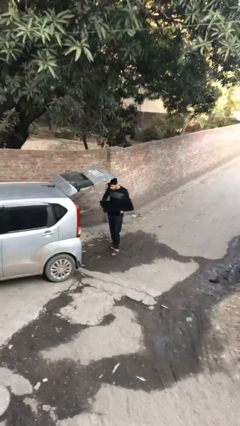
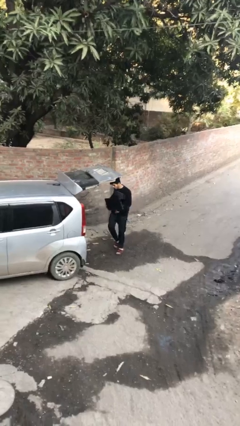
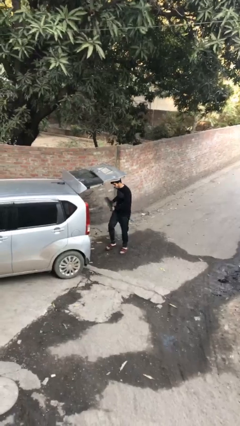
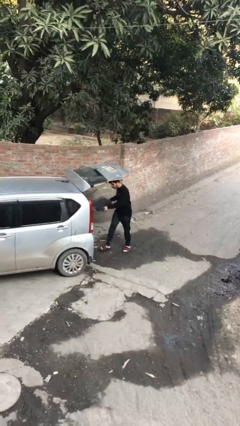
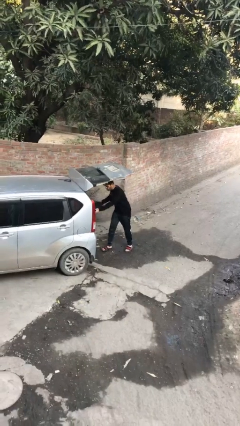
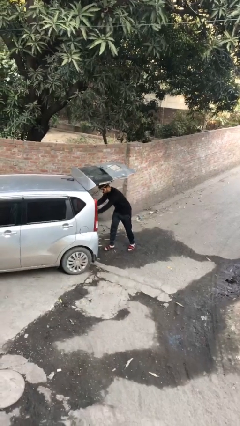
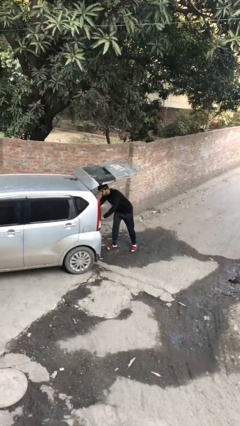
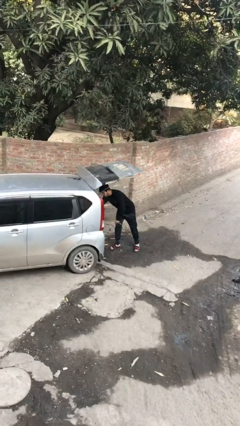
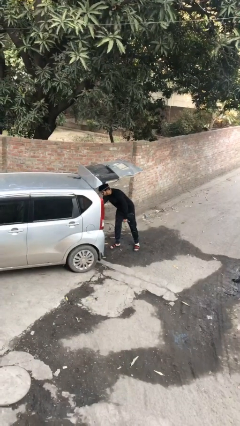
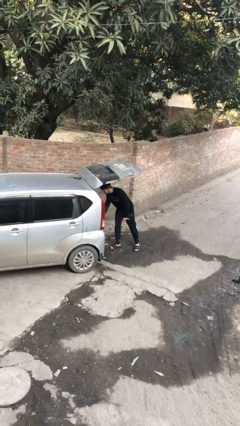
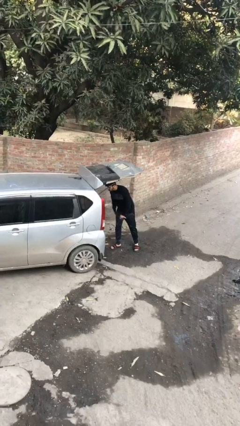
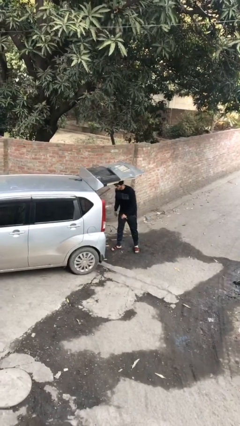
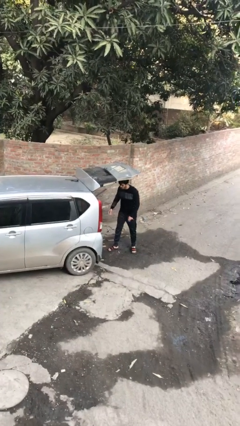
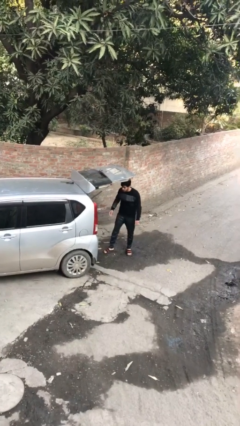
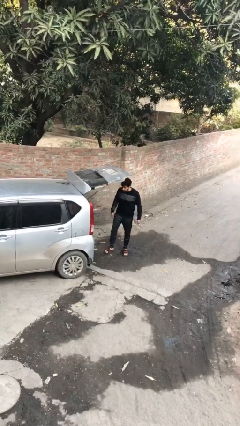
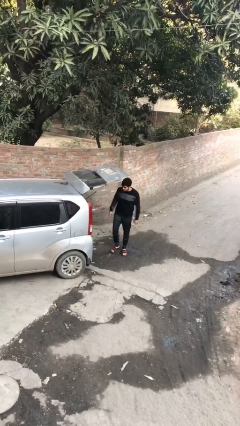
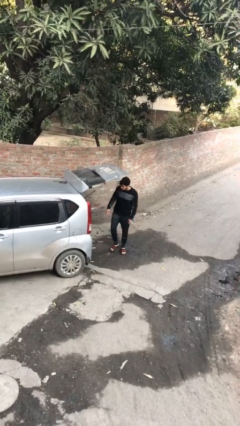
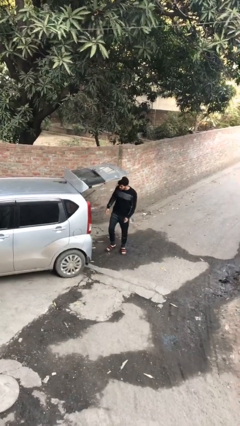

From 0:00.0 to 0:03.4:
person loads car

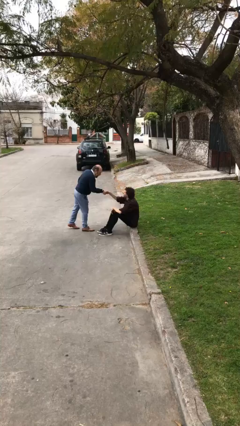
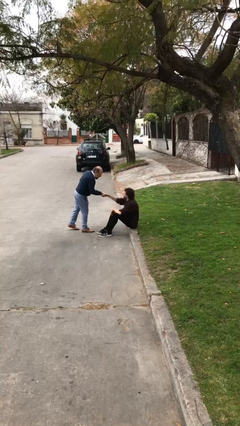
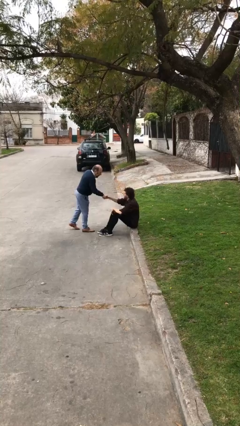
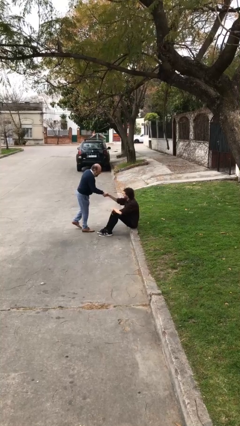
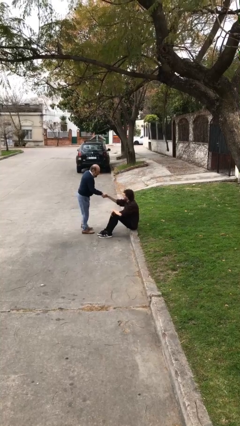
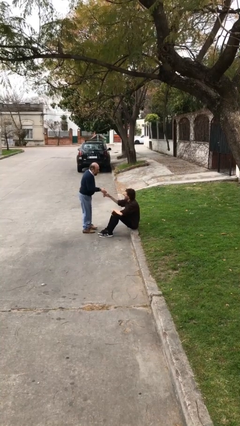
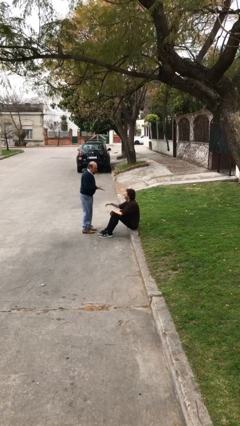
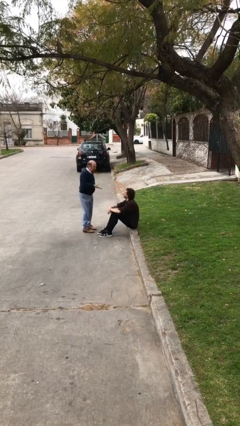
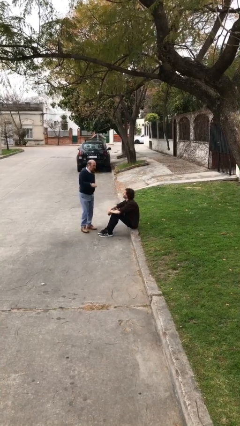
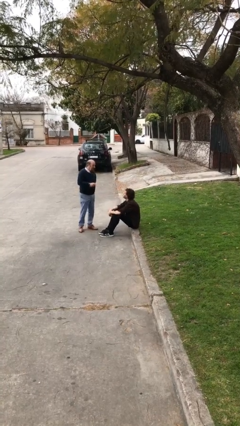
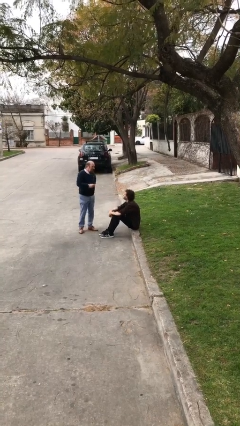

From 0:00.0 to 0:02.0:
person shakes hand

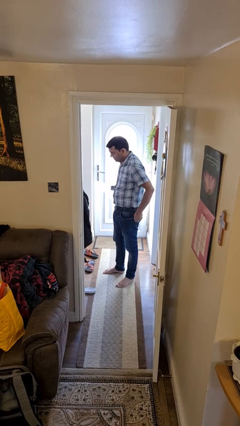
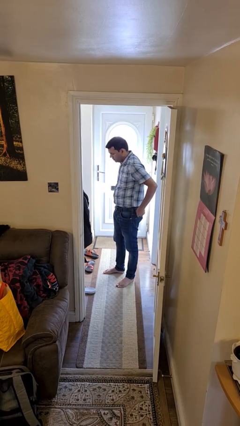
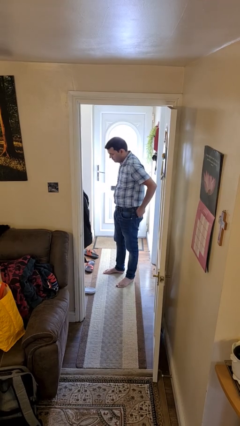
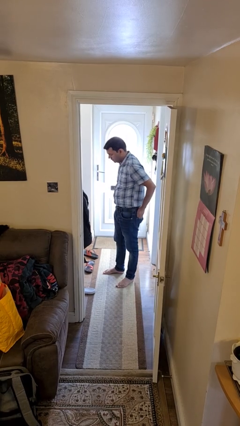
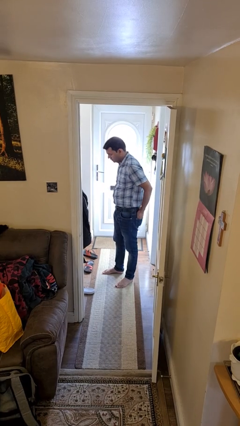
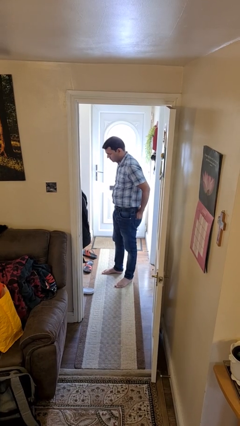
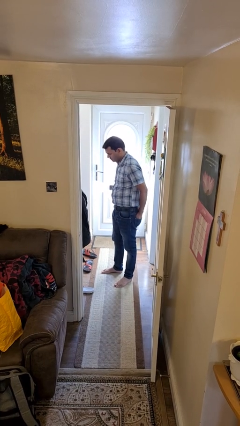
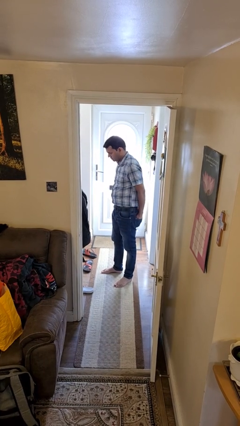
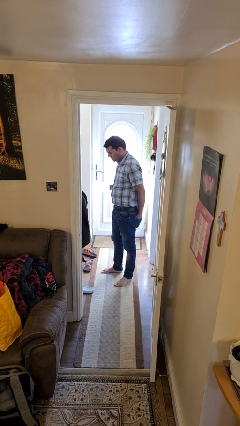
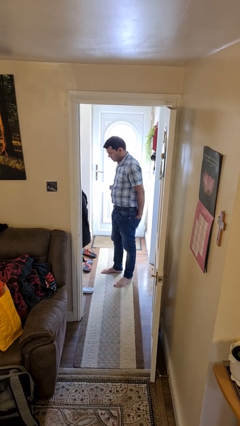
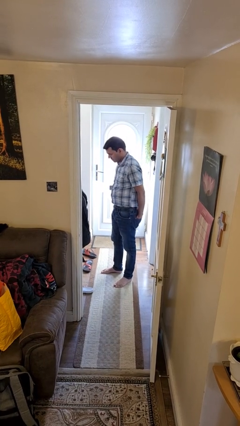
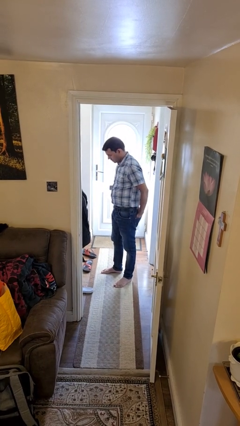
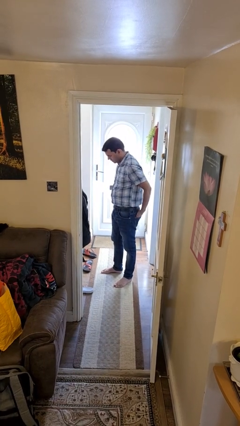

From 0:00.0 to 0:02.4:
person puts hands in back pockets

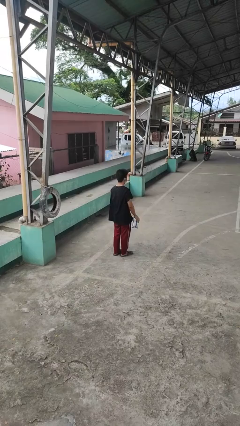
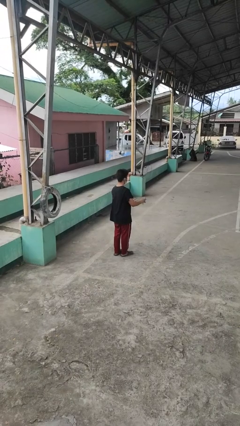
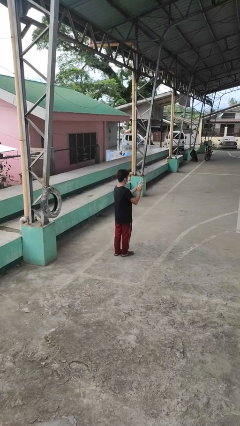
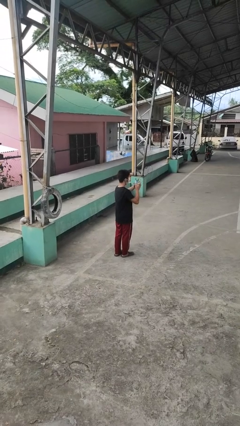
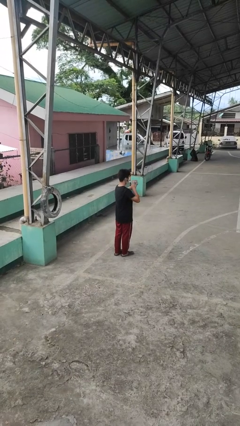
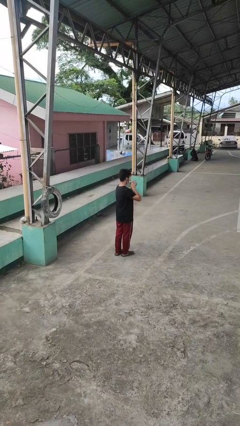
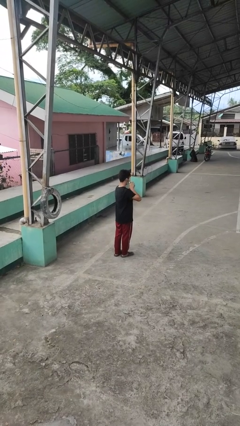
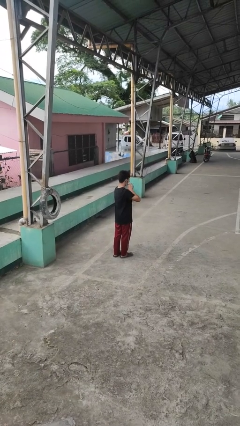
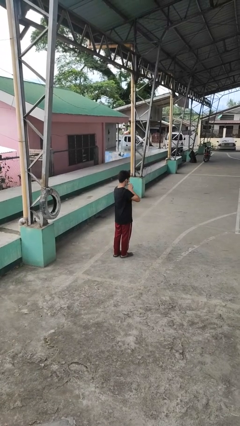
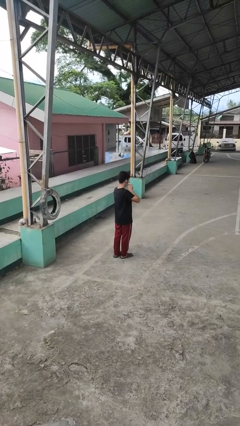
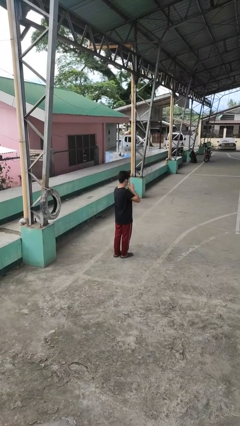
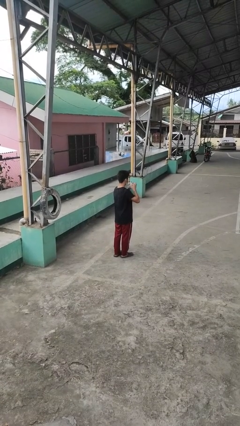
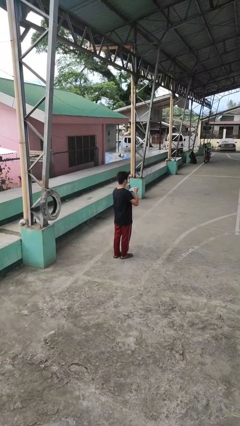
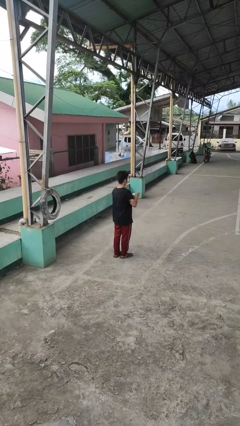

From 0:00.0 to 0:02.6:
person squeezes object

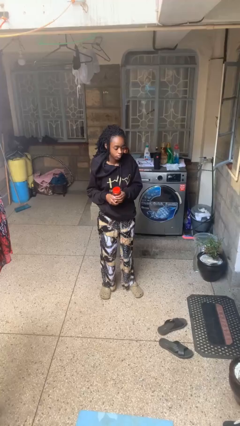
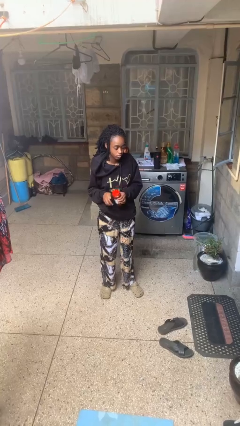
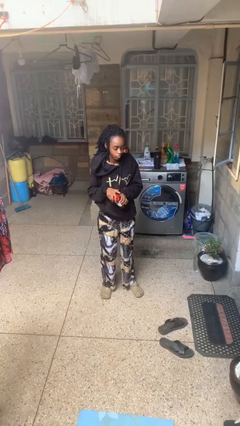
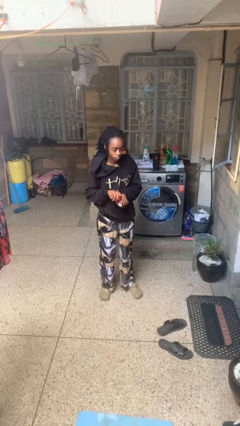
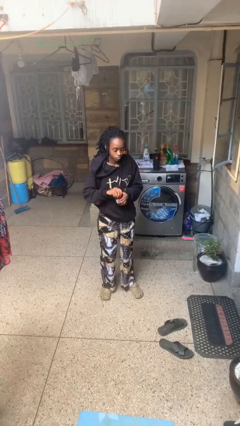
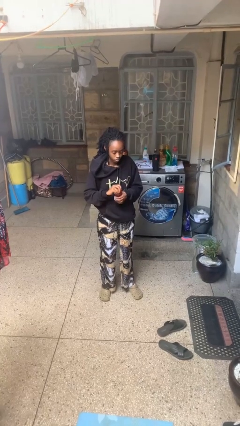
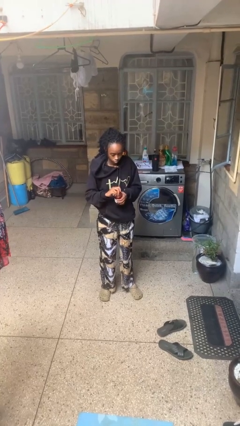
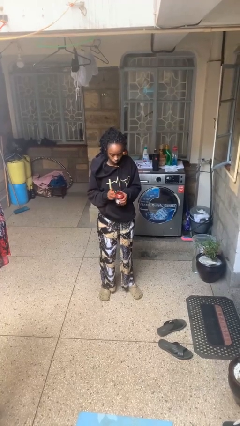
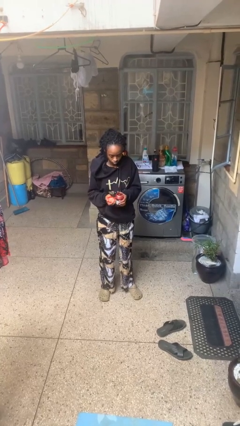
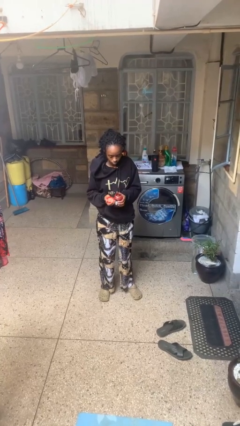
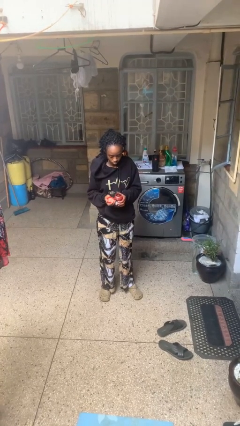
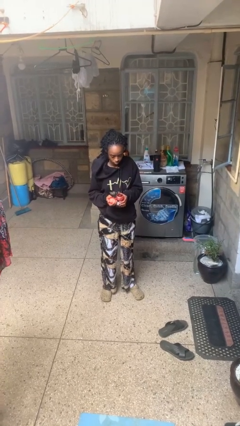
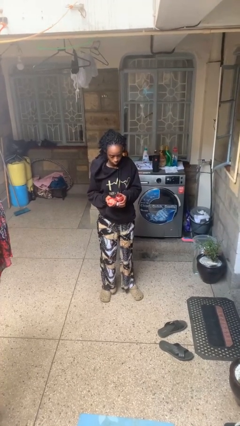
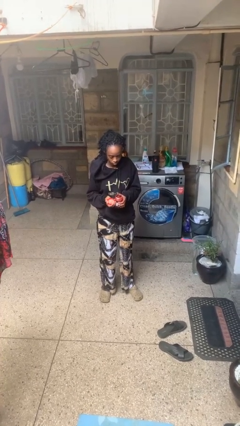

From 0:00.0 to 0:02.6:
person opens jar

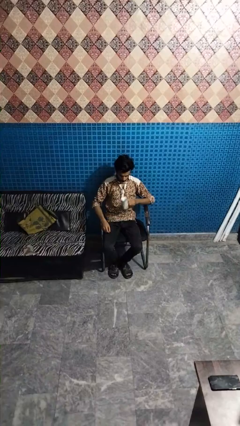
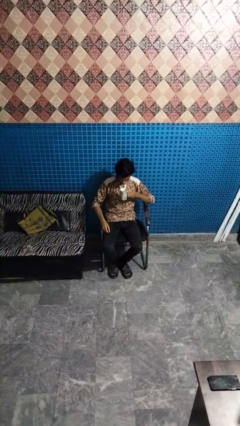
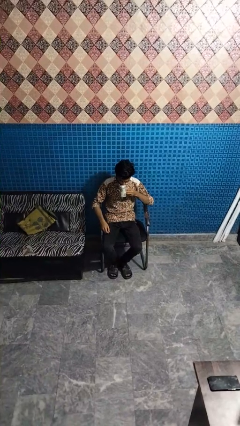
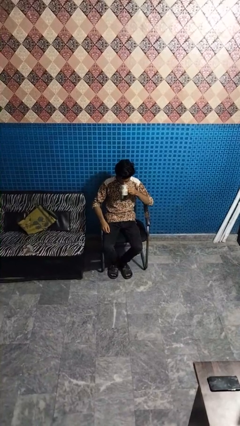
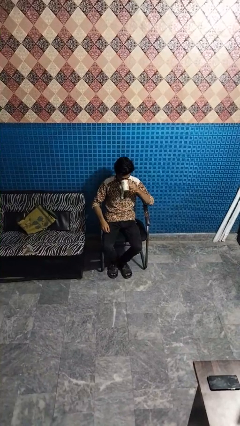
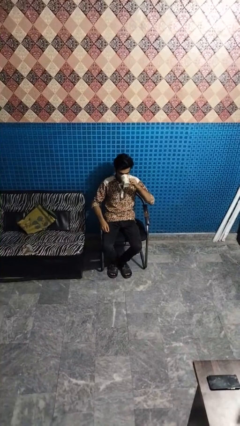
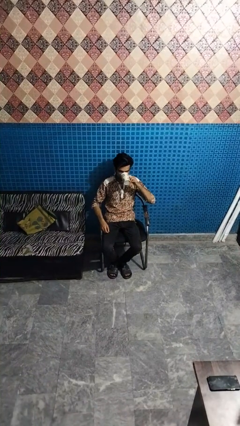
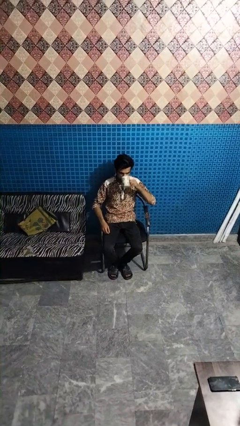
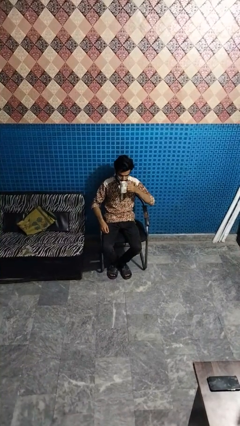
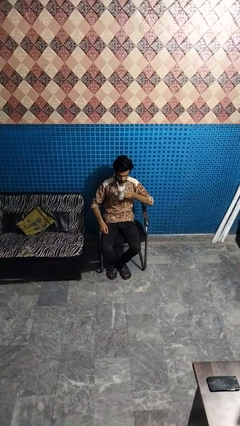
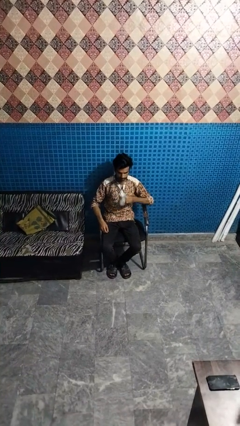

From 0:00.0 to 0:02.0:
person drinks from mug

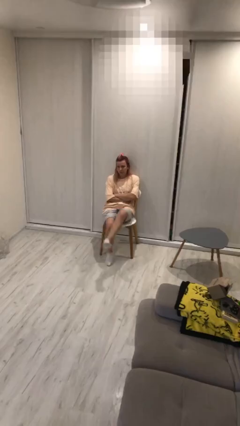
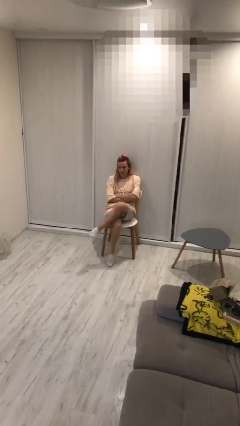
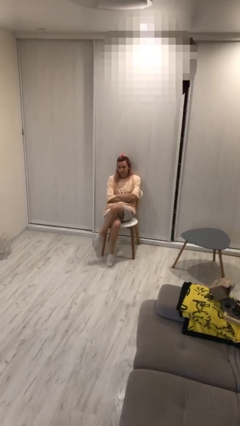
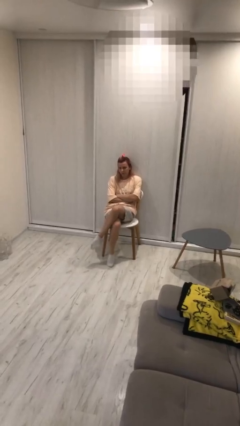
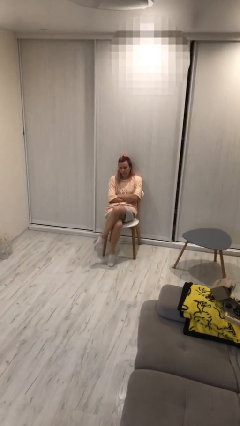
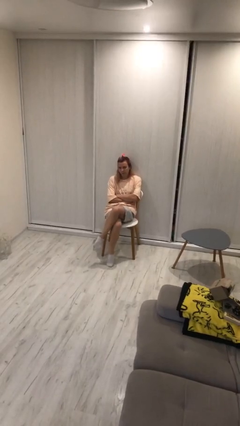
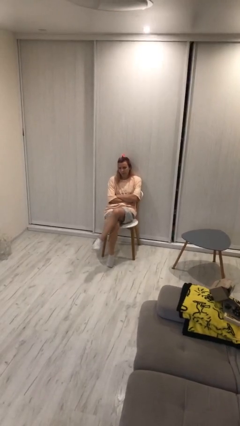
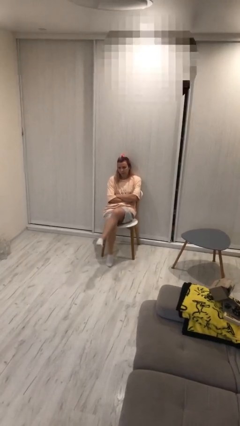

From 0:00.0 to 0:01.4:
person crosses legs

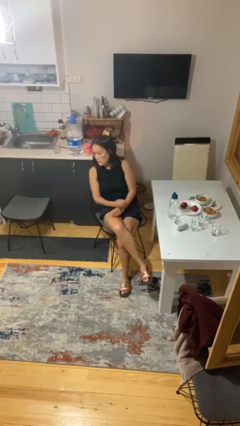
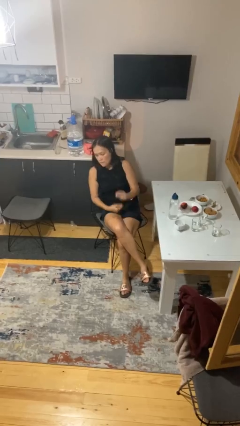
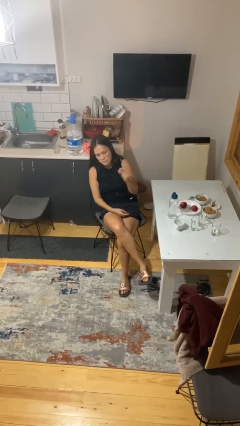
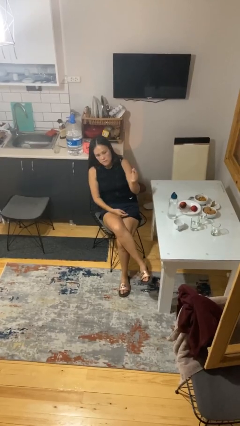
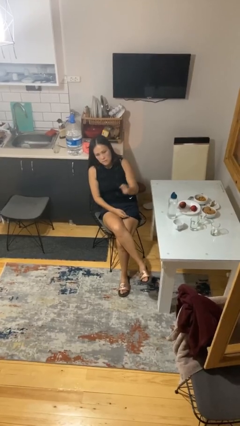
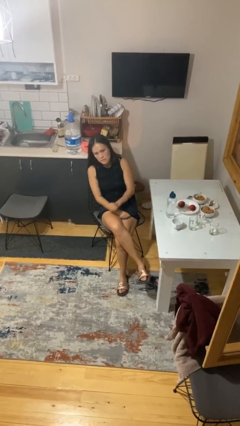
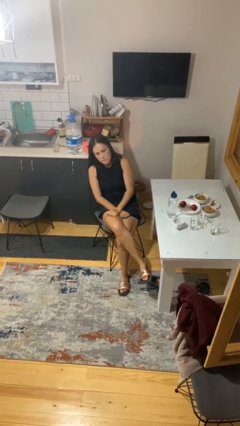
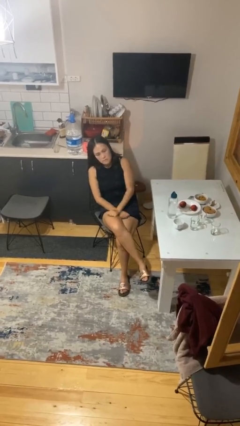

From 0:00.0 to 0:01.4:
person snaps fingers
